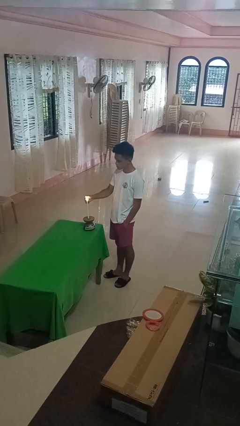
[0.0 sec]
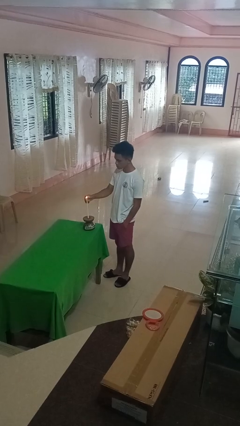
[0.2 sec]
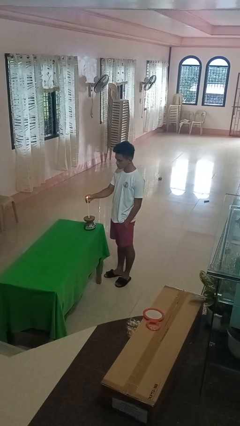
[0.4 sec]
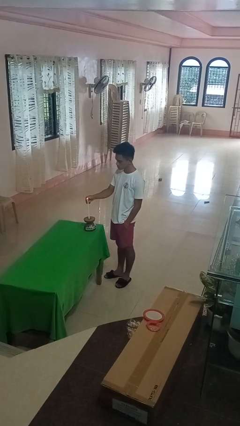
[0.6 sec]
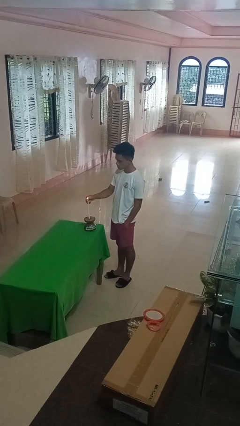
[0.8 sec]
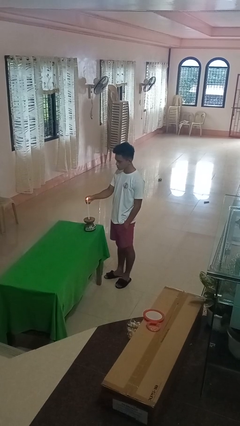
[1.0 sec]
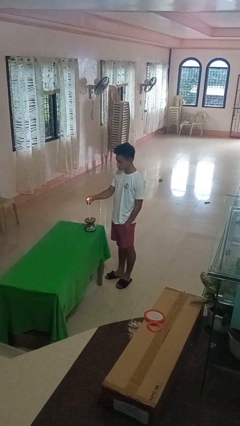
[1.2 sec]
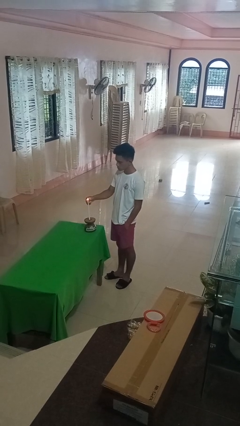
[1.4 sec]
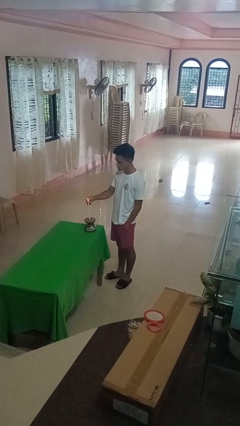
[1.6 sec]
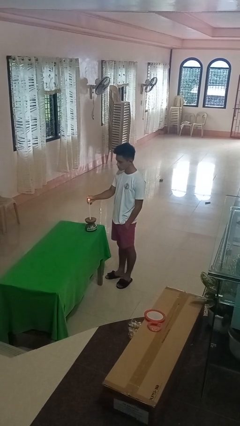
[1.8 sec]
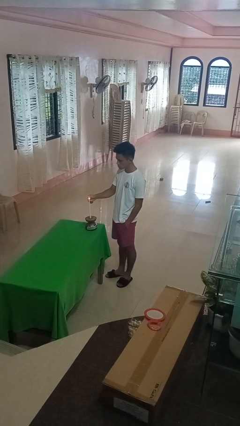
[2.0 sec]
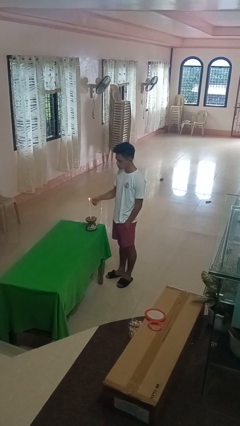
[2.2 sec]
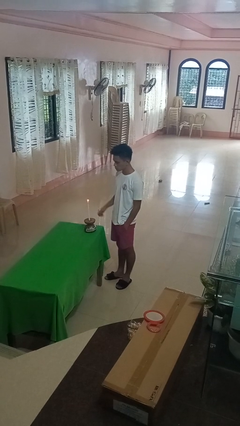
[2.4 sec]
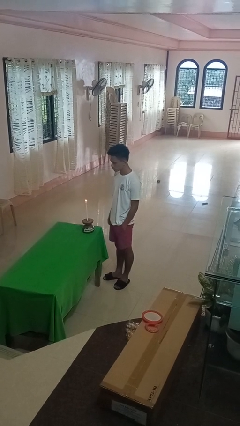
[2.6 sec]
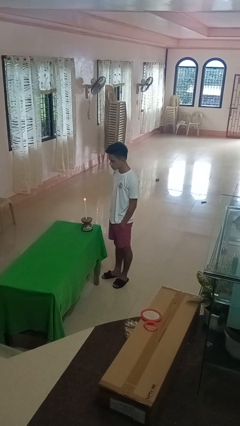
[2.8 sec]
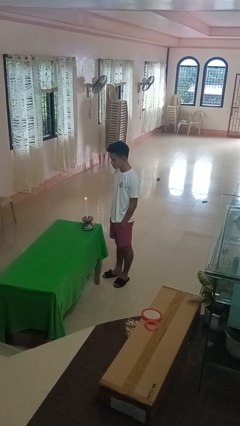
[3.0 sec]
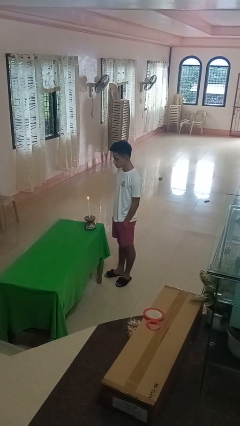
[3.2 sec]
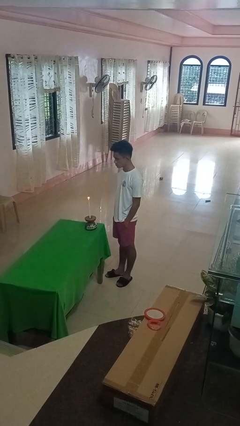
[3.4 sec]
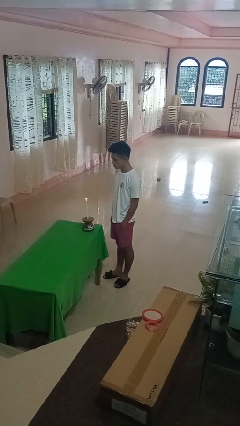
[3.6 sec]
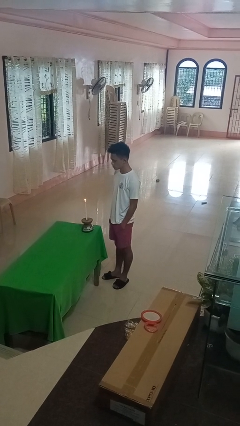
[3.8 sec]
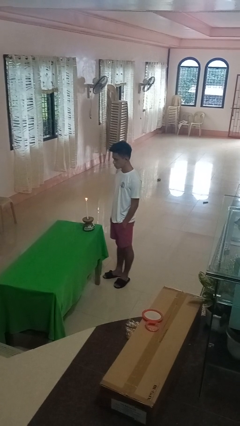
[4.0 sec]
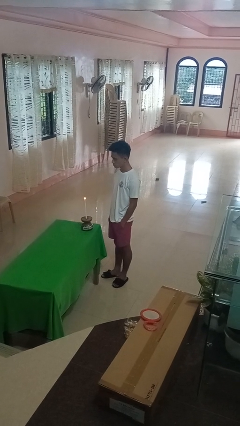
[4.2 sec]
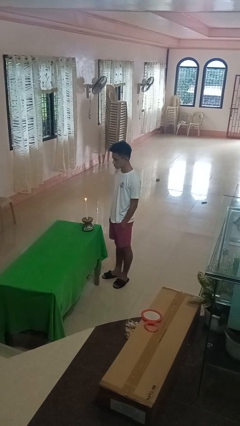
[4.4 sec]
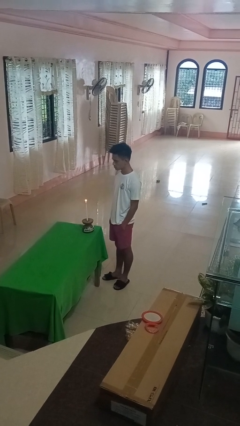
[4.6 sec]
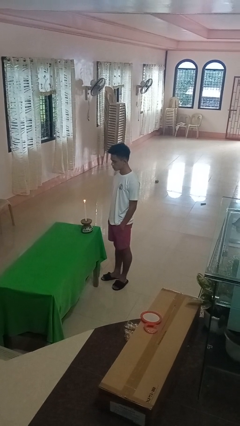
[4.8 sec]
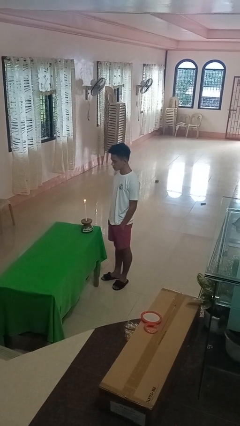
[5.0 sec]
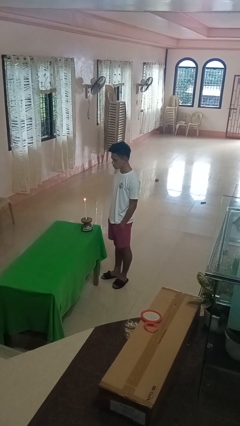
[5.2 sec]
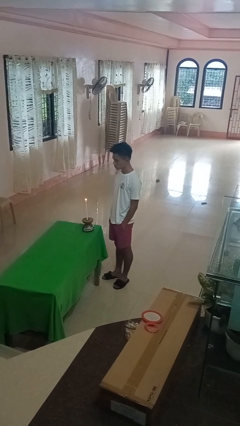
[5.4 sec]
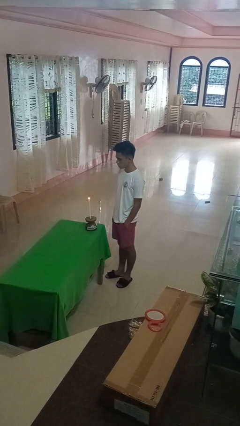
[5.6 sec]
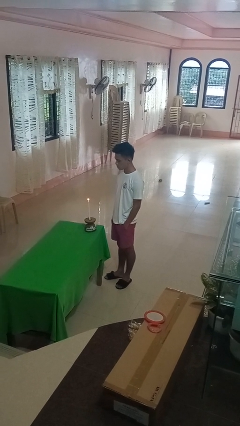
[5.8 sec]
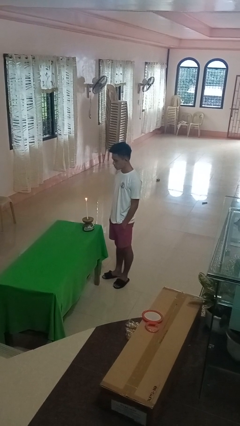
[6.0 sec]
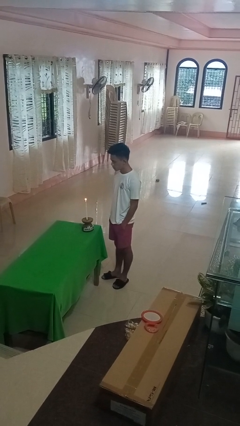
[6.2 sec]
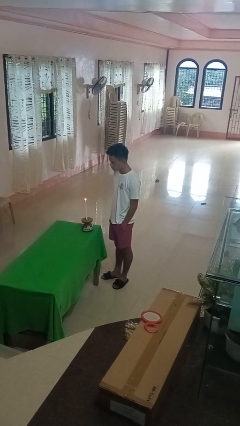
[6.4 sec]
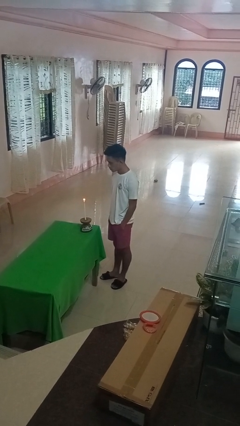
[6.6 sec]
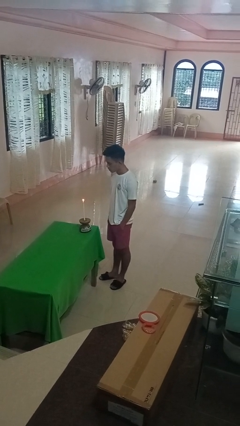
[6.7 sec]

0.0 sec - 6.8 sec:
person lights candle

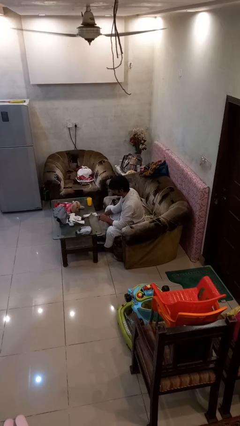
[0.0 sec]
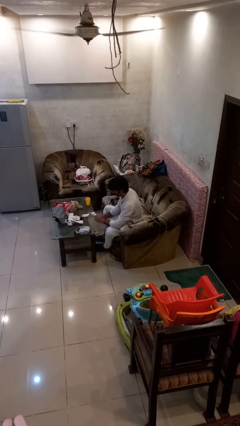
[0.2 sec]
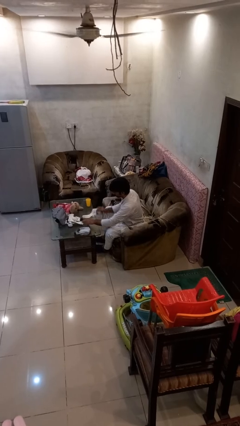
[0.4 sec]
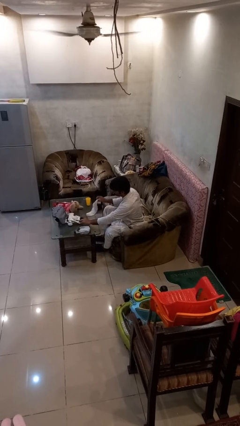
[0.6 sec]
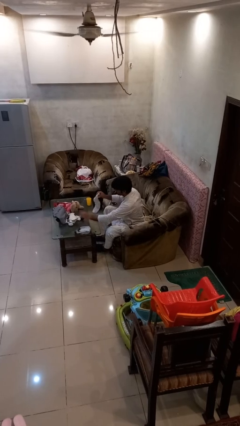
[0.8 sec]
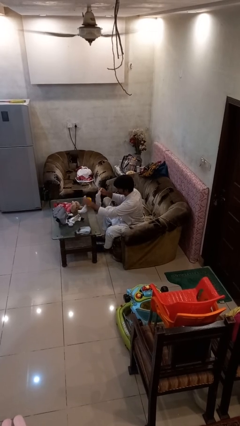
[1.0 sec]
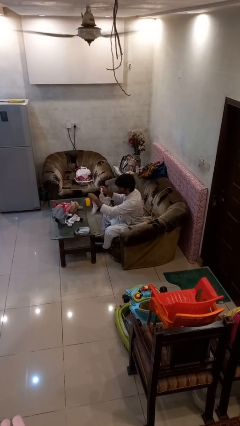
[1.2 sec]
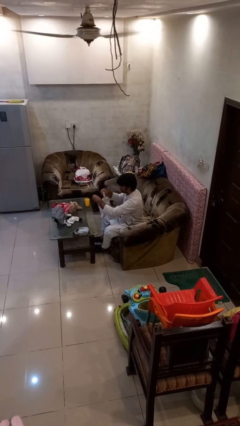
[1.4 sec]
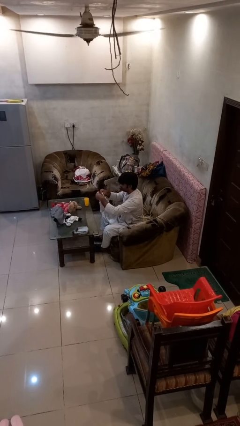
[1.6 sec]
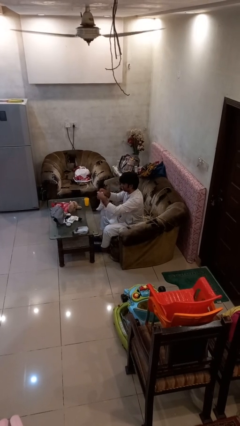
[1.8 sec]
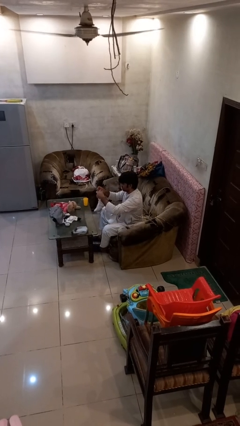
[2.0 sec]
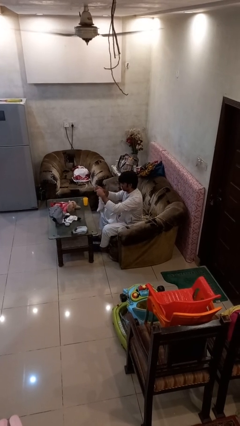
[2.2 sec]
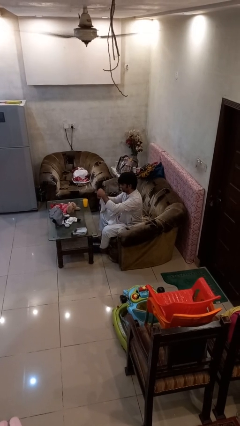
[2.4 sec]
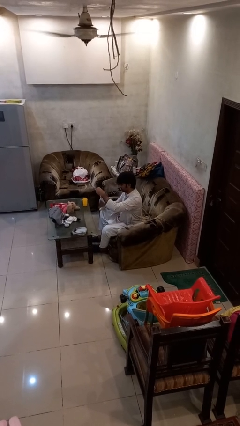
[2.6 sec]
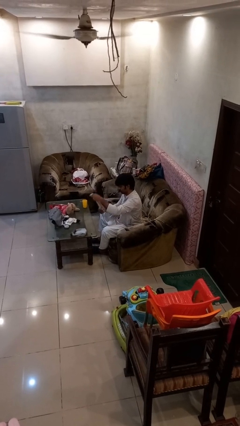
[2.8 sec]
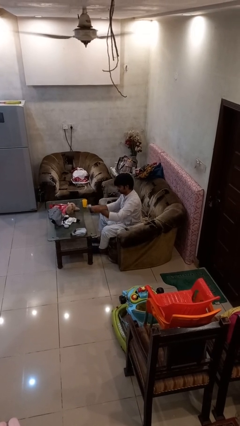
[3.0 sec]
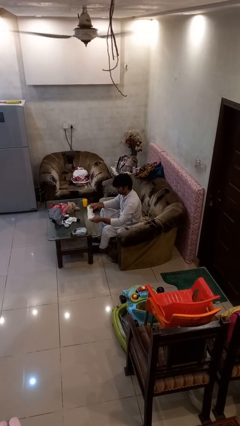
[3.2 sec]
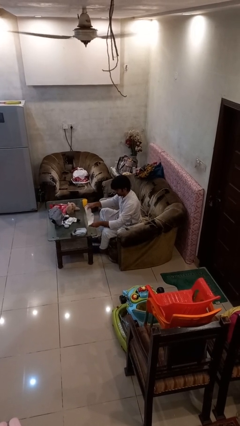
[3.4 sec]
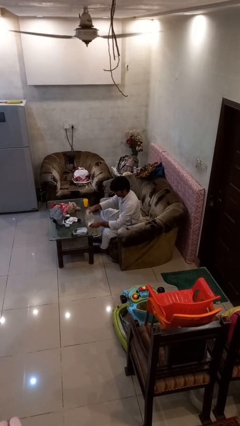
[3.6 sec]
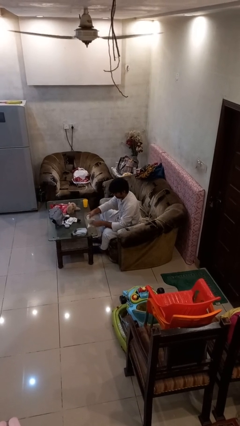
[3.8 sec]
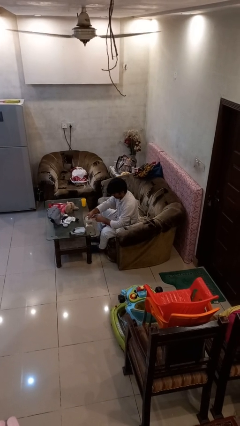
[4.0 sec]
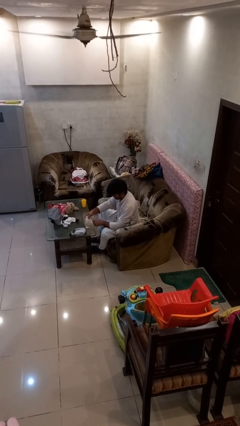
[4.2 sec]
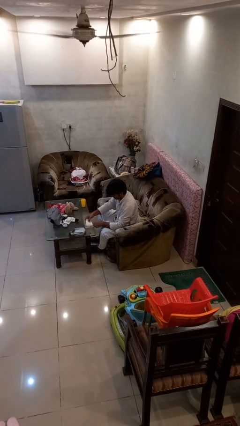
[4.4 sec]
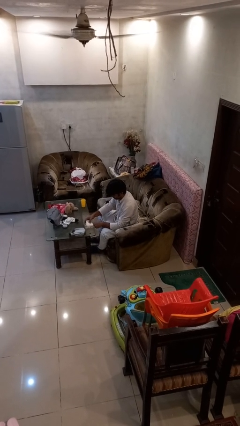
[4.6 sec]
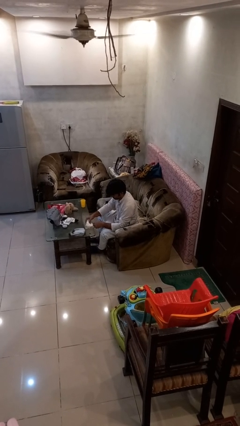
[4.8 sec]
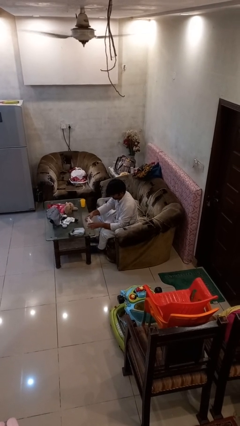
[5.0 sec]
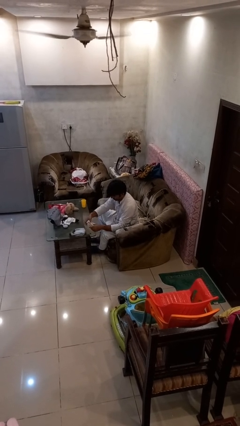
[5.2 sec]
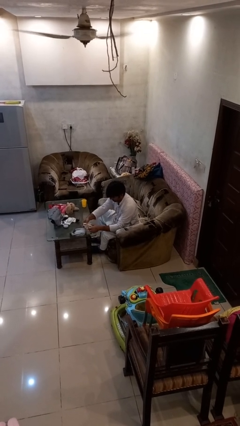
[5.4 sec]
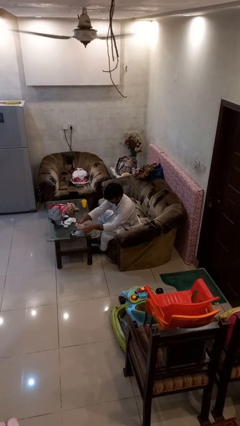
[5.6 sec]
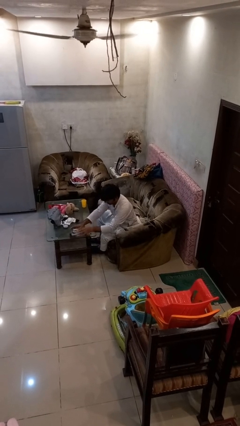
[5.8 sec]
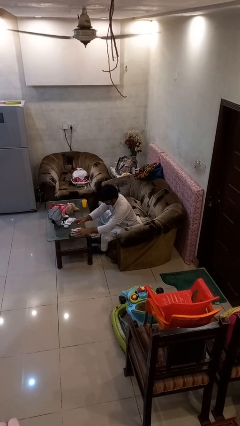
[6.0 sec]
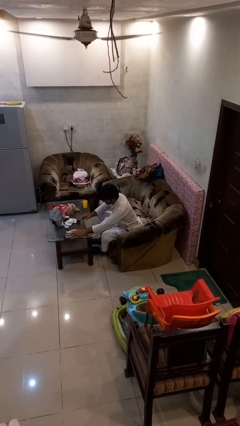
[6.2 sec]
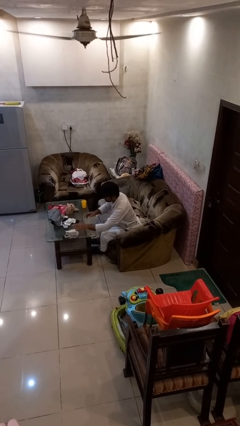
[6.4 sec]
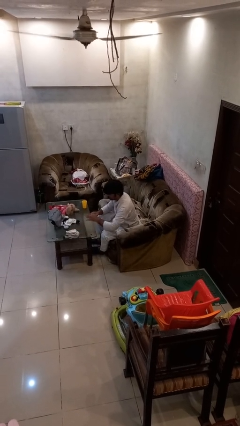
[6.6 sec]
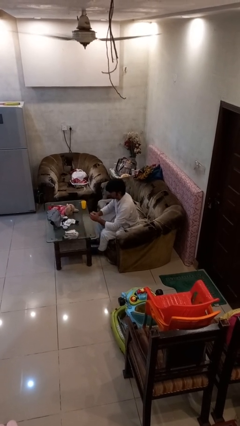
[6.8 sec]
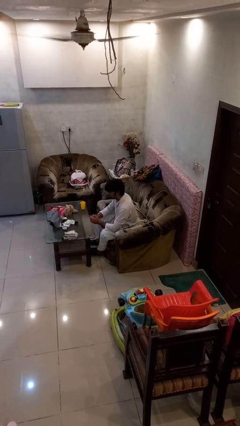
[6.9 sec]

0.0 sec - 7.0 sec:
person folds socks

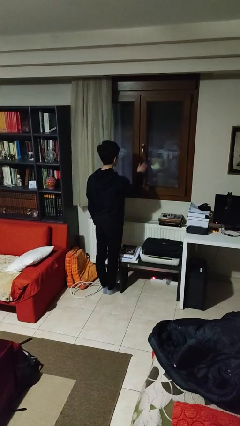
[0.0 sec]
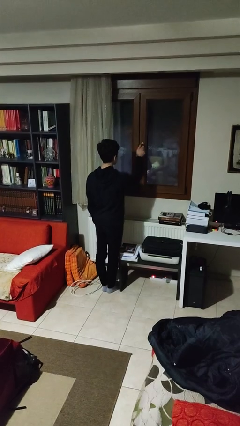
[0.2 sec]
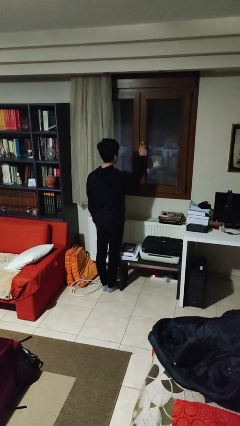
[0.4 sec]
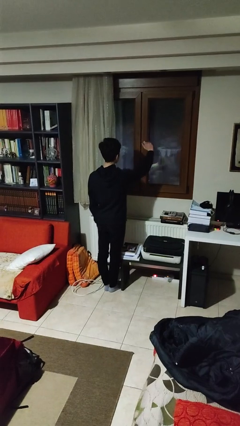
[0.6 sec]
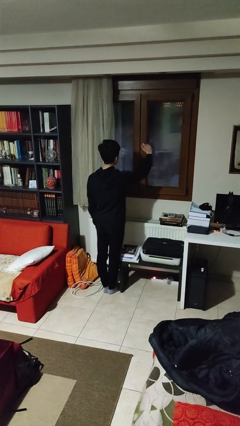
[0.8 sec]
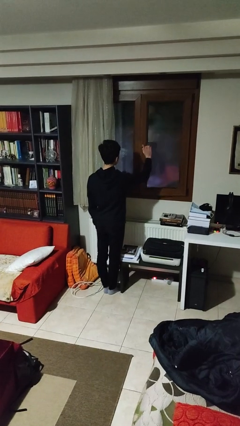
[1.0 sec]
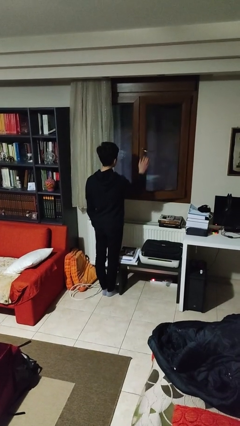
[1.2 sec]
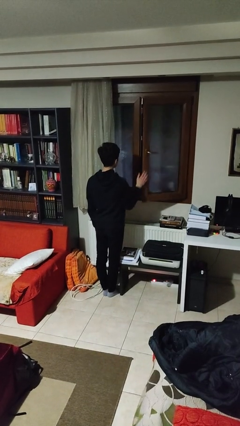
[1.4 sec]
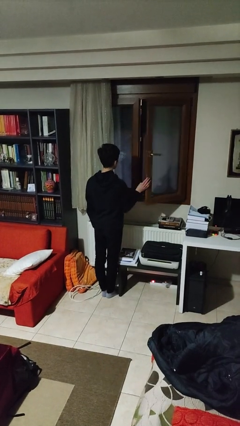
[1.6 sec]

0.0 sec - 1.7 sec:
person opens home window

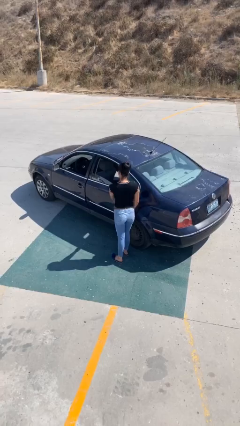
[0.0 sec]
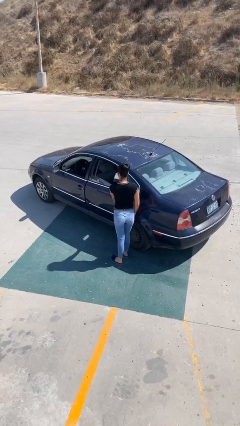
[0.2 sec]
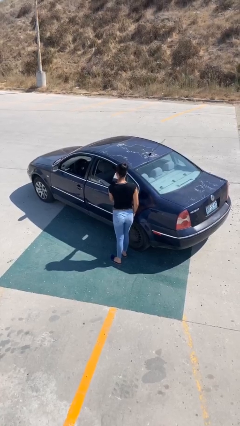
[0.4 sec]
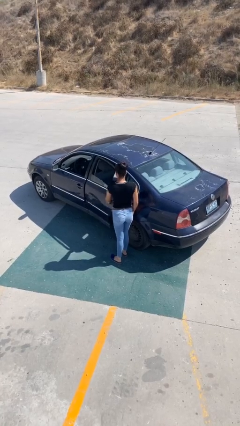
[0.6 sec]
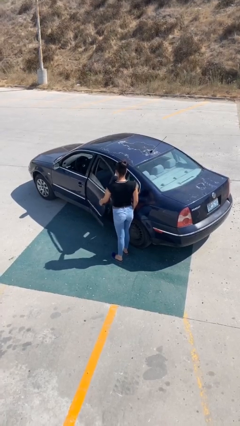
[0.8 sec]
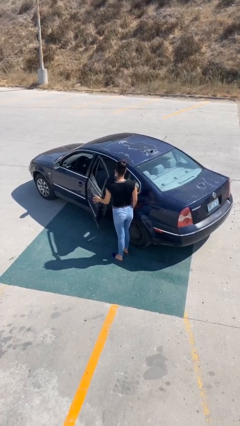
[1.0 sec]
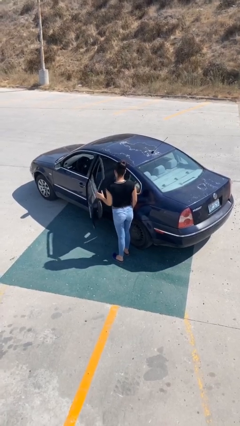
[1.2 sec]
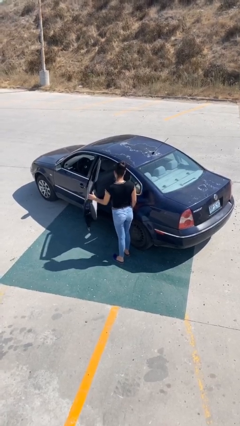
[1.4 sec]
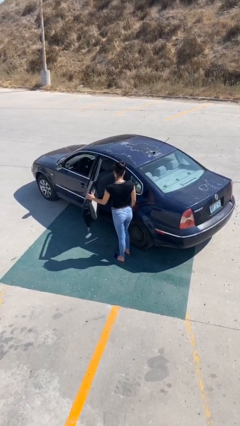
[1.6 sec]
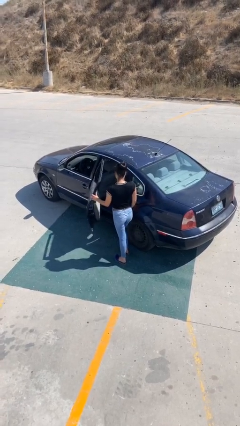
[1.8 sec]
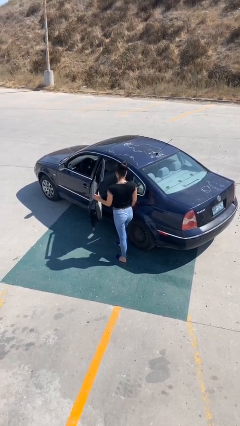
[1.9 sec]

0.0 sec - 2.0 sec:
person opens car door

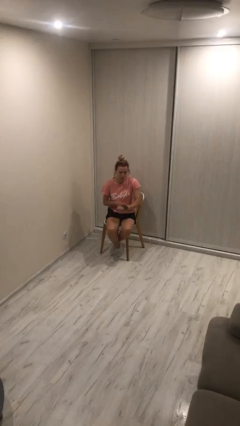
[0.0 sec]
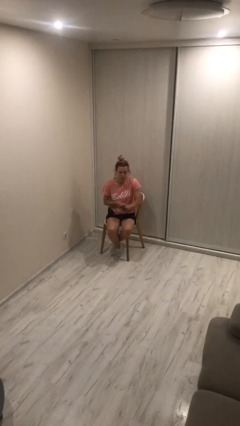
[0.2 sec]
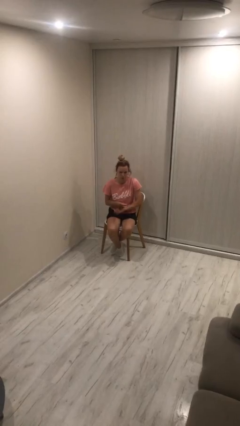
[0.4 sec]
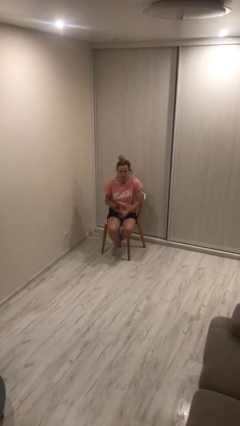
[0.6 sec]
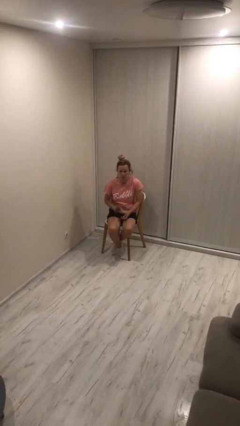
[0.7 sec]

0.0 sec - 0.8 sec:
person takes off wristwatch
